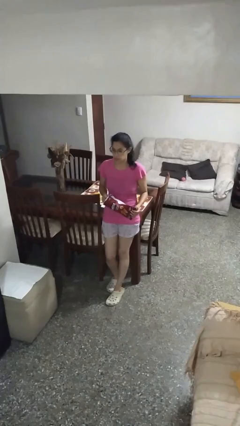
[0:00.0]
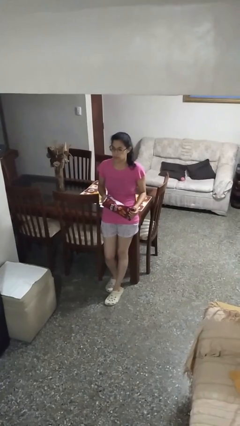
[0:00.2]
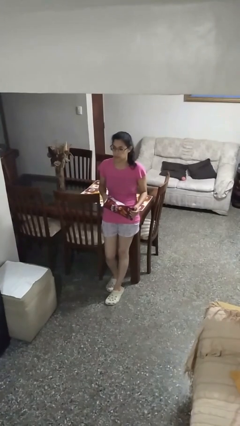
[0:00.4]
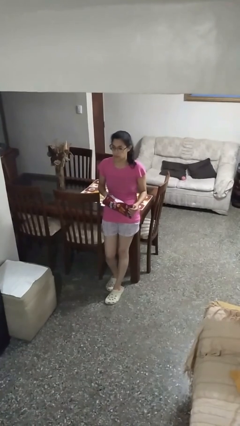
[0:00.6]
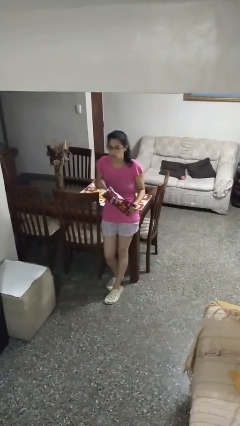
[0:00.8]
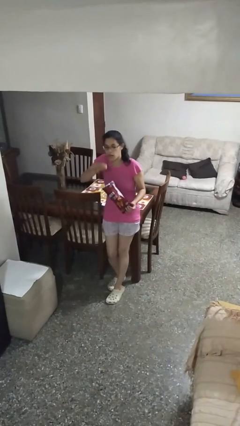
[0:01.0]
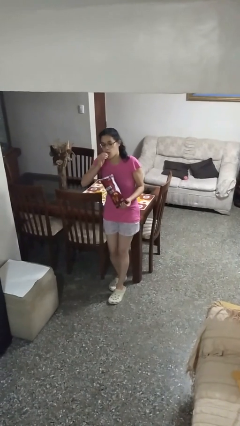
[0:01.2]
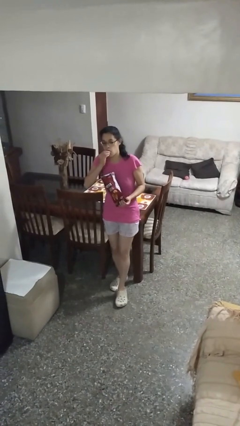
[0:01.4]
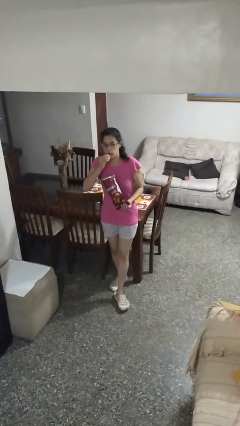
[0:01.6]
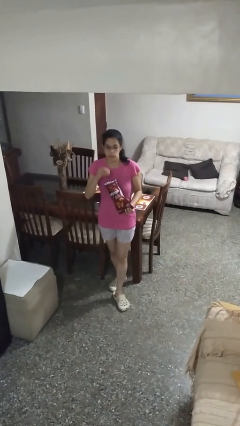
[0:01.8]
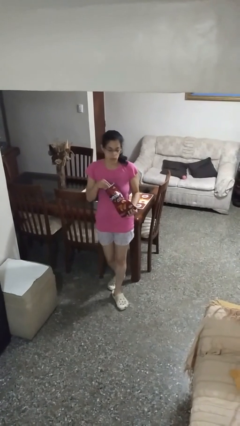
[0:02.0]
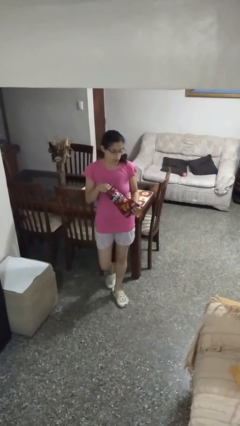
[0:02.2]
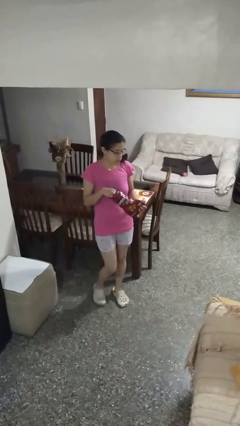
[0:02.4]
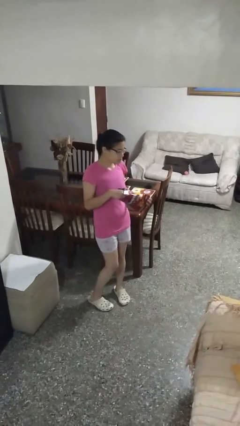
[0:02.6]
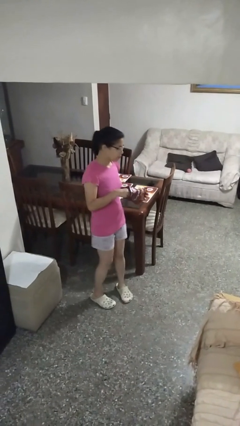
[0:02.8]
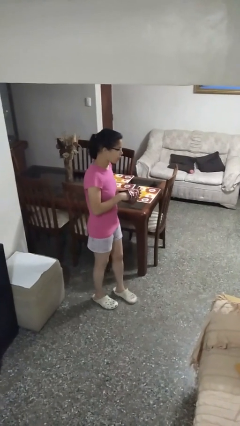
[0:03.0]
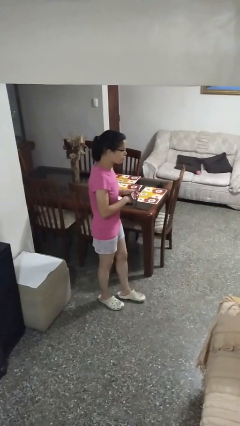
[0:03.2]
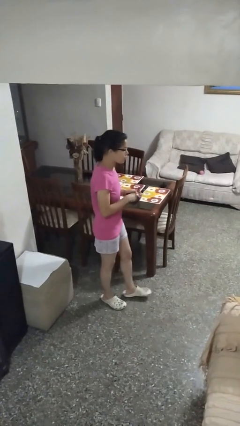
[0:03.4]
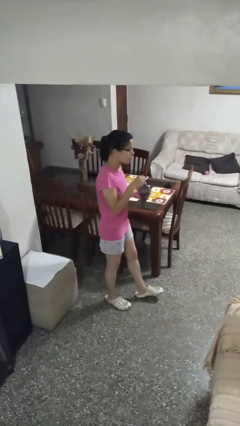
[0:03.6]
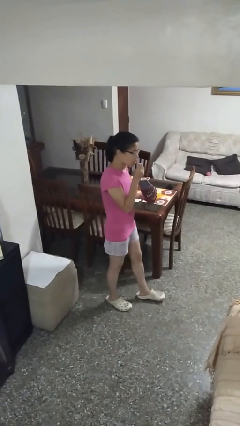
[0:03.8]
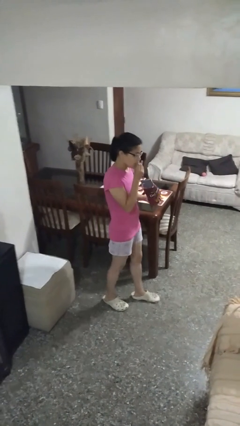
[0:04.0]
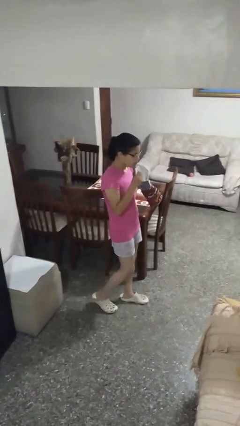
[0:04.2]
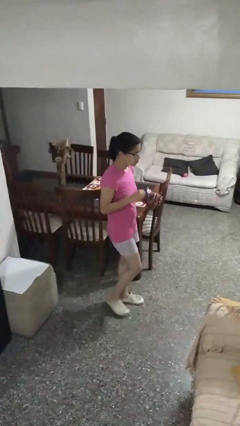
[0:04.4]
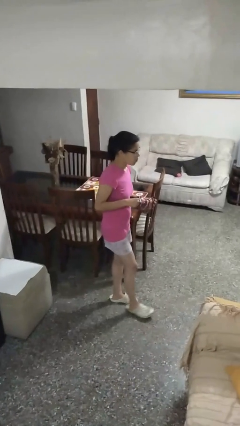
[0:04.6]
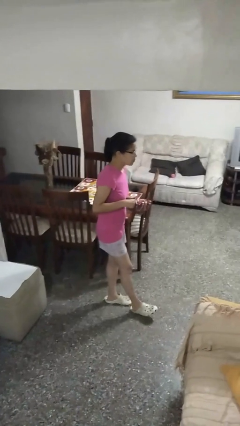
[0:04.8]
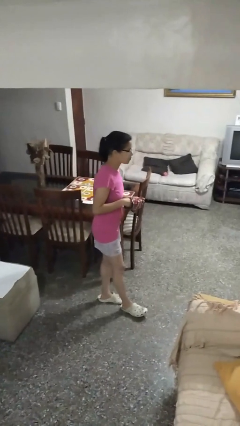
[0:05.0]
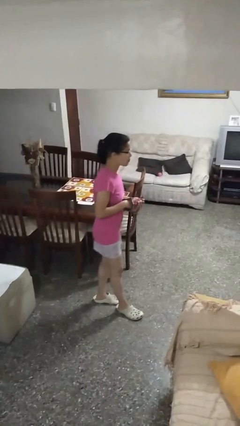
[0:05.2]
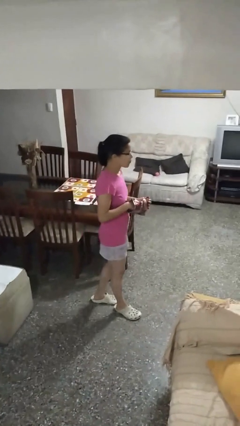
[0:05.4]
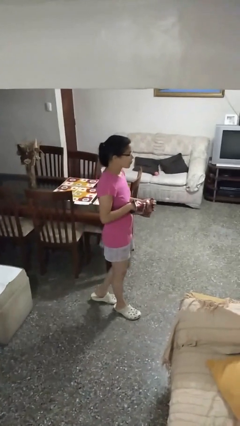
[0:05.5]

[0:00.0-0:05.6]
person eats snack from bag

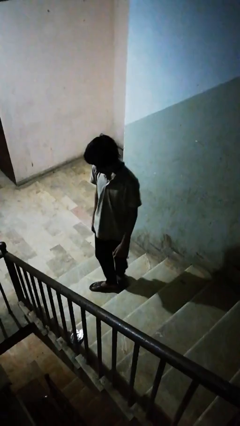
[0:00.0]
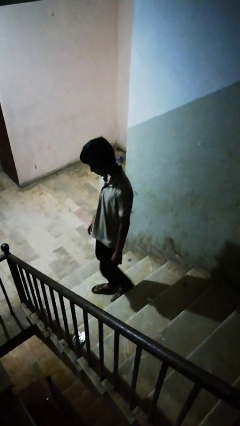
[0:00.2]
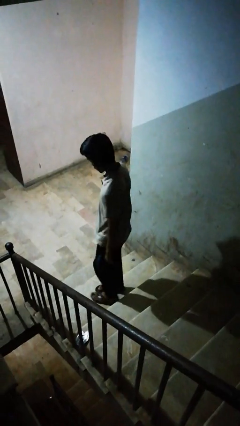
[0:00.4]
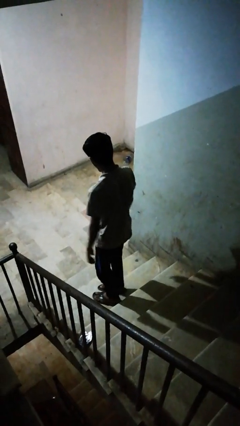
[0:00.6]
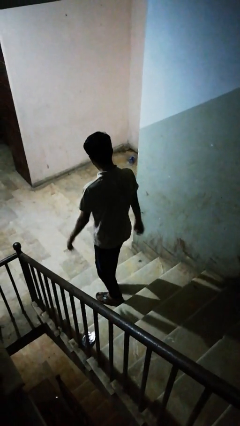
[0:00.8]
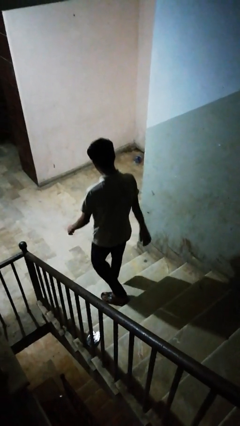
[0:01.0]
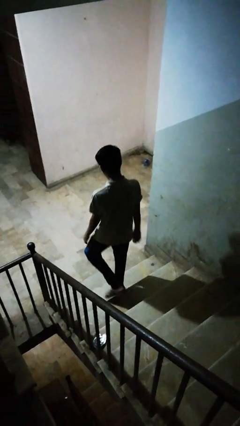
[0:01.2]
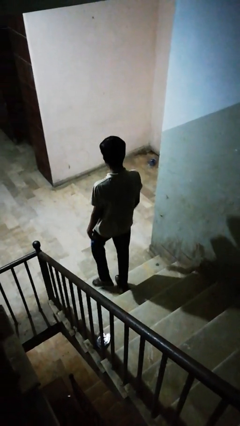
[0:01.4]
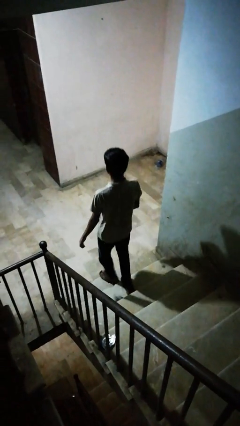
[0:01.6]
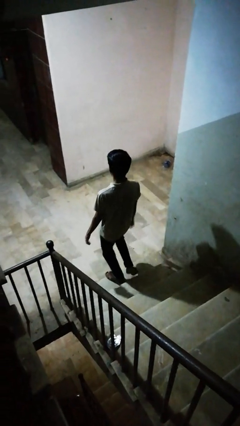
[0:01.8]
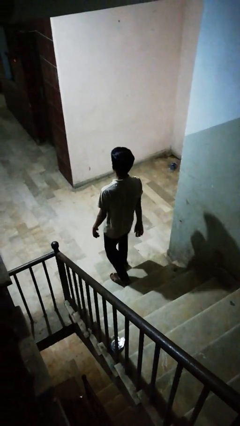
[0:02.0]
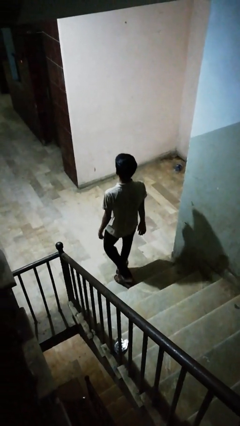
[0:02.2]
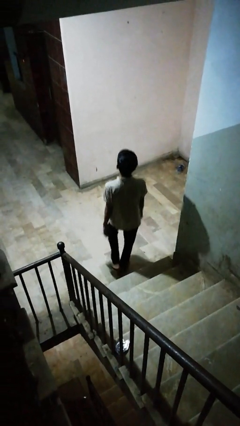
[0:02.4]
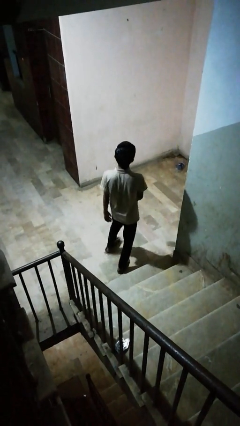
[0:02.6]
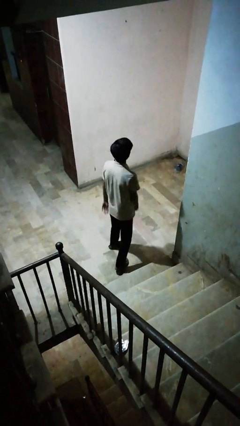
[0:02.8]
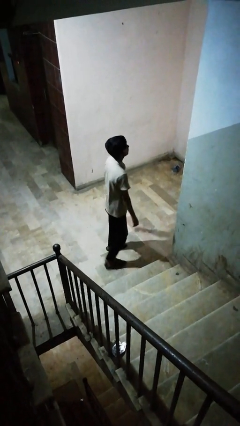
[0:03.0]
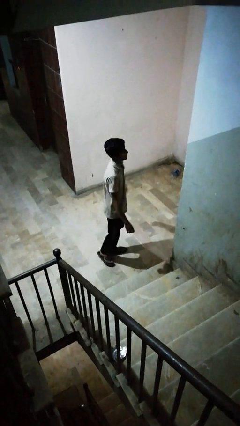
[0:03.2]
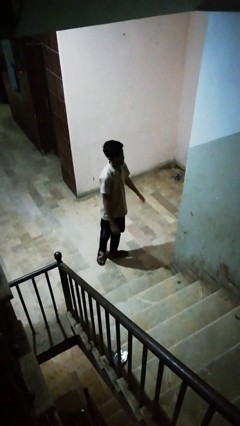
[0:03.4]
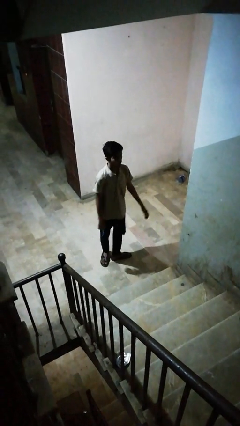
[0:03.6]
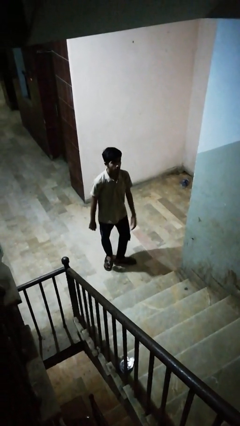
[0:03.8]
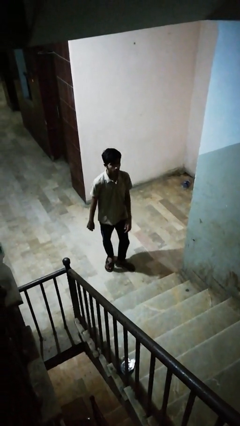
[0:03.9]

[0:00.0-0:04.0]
person climbs down stairs

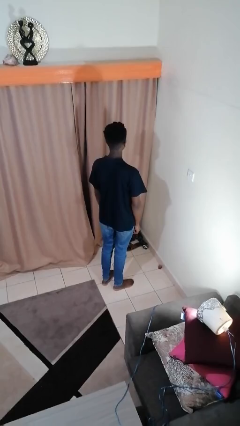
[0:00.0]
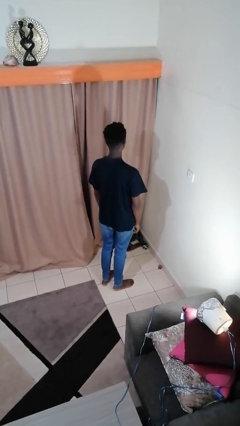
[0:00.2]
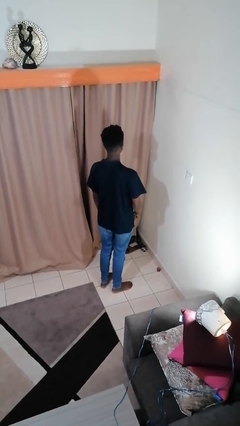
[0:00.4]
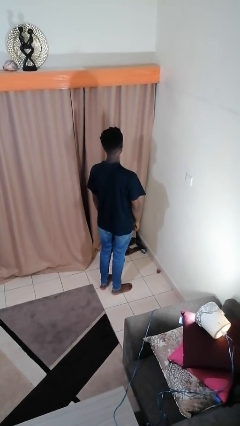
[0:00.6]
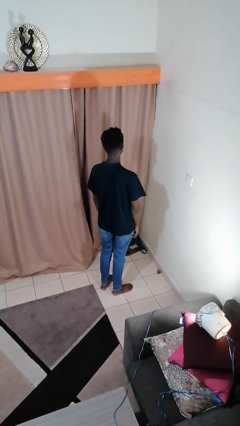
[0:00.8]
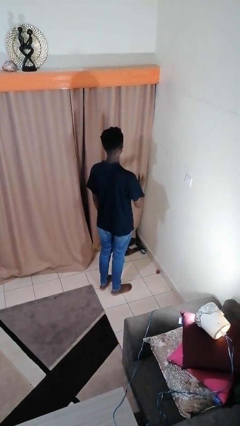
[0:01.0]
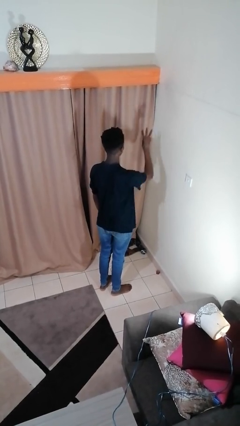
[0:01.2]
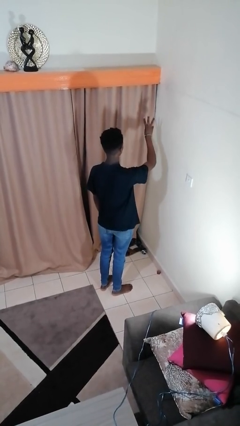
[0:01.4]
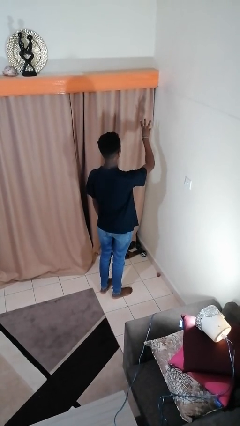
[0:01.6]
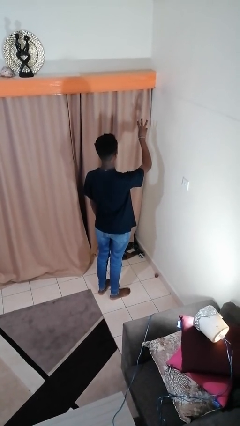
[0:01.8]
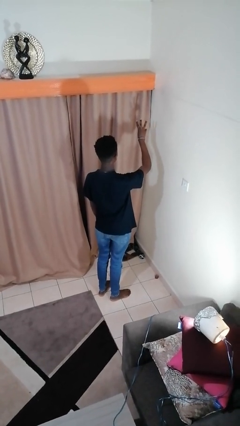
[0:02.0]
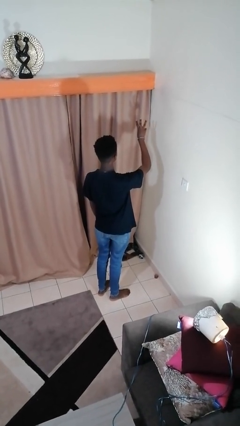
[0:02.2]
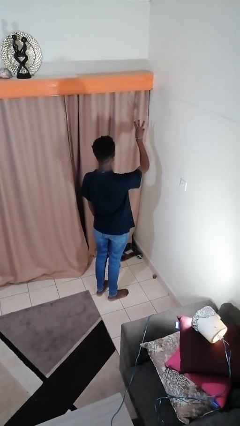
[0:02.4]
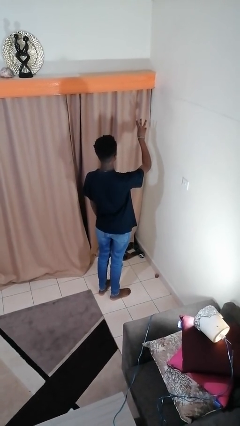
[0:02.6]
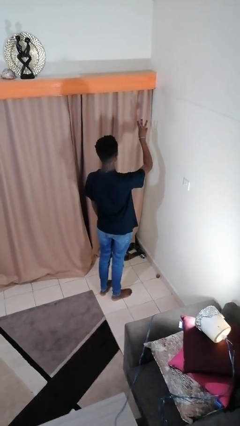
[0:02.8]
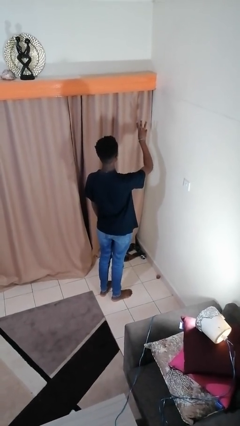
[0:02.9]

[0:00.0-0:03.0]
person gestures number three

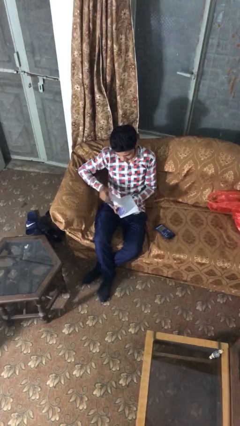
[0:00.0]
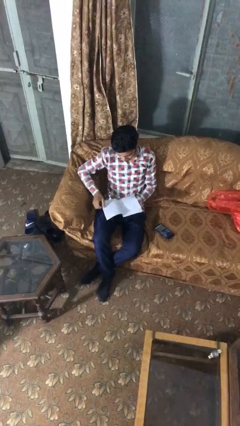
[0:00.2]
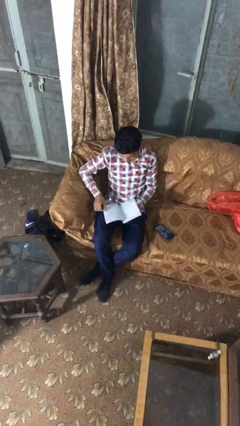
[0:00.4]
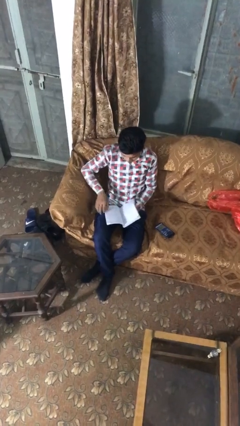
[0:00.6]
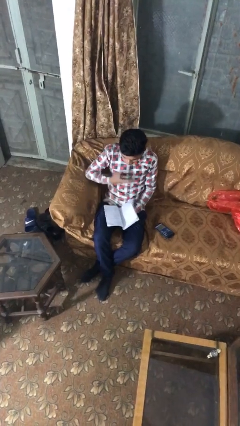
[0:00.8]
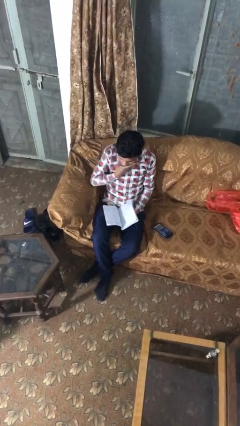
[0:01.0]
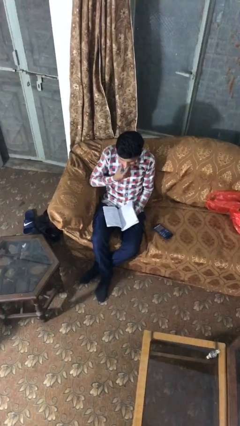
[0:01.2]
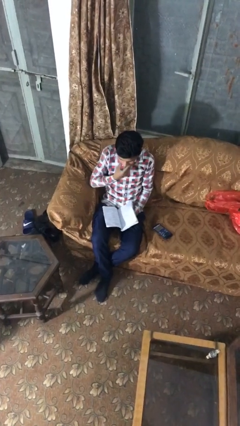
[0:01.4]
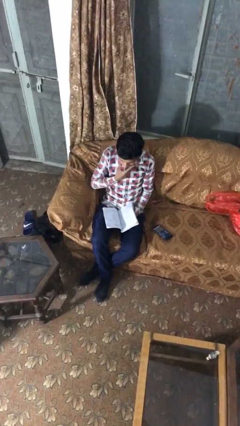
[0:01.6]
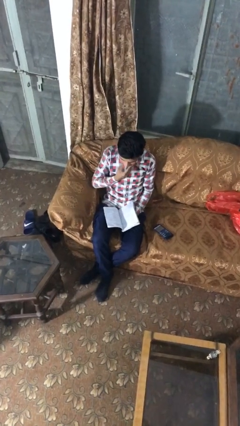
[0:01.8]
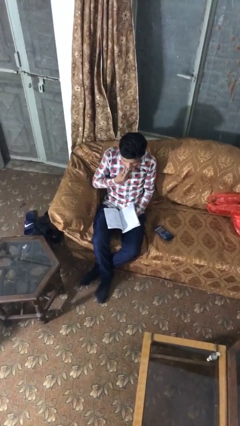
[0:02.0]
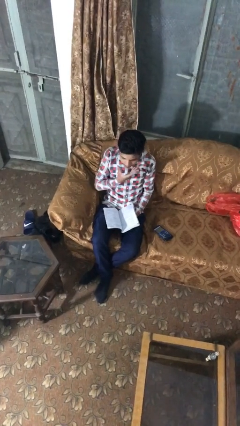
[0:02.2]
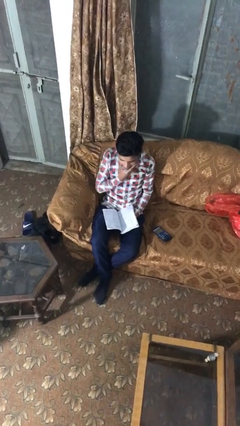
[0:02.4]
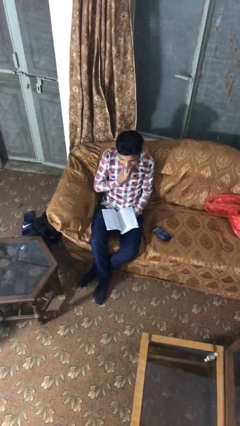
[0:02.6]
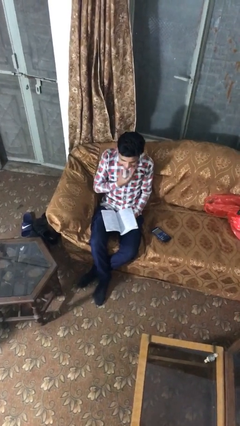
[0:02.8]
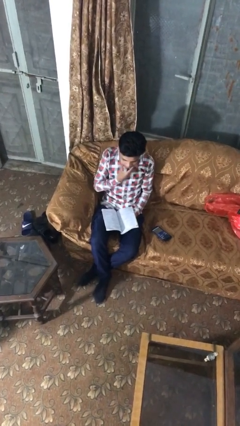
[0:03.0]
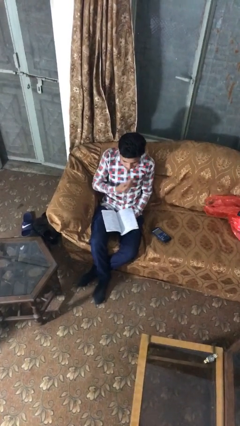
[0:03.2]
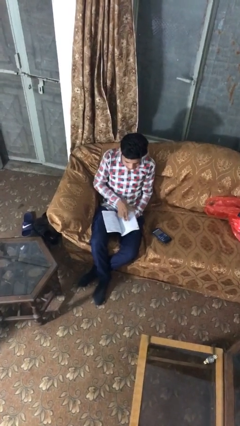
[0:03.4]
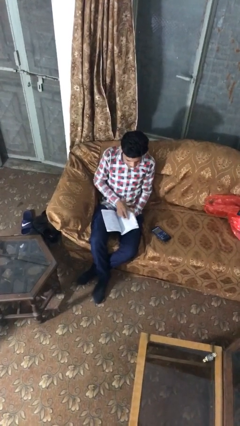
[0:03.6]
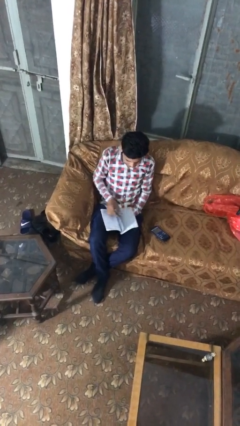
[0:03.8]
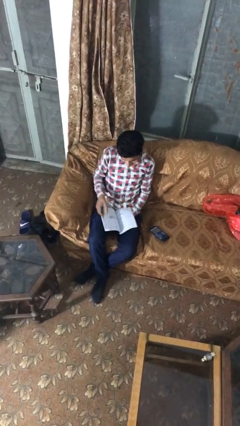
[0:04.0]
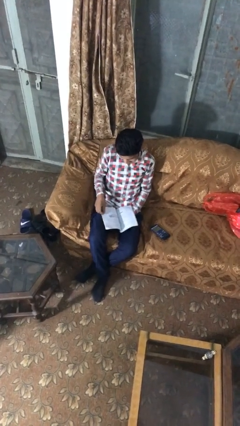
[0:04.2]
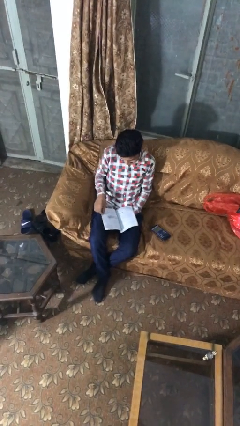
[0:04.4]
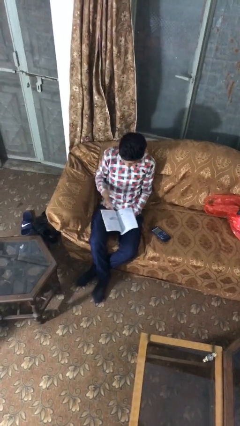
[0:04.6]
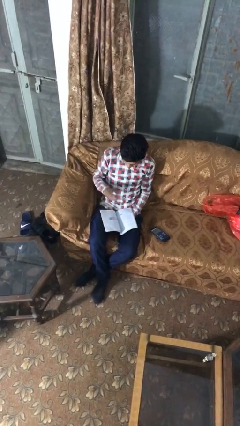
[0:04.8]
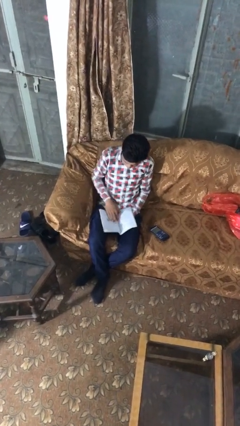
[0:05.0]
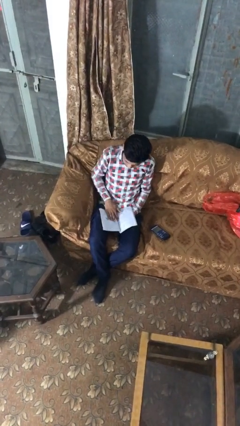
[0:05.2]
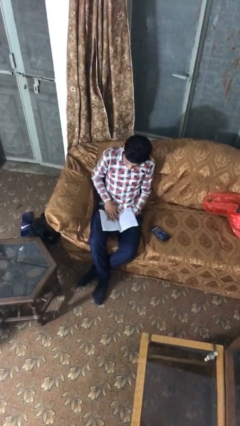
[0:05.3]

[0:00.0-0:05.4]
person reads document
